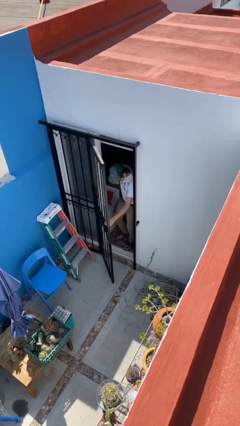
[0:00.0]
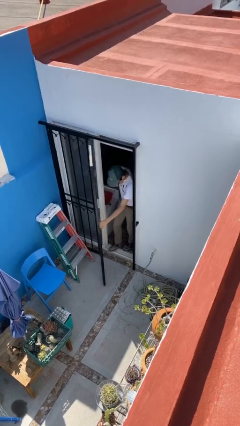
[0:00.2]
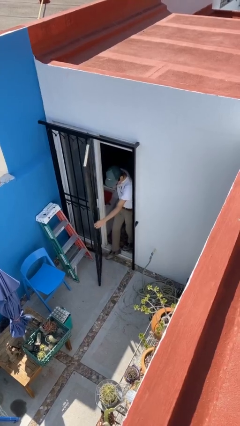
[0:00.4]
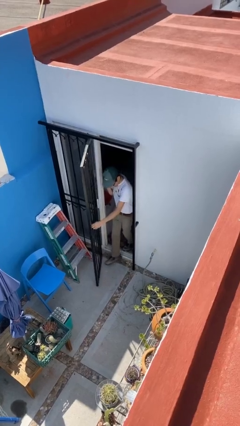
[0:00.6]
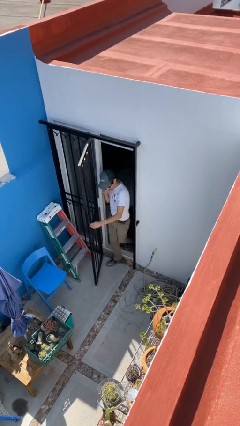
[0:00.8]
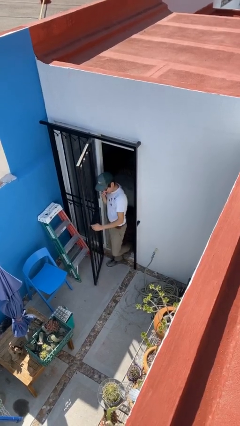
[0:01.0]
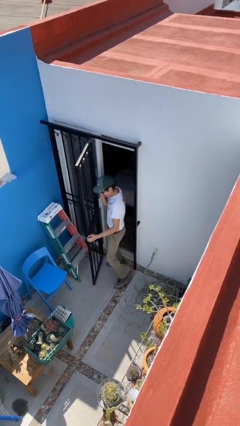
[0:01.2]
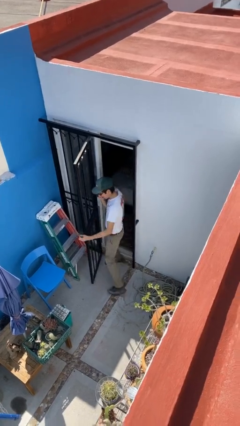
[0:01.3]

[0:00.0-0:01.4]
person opens facility door

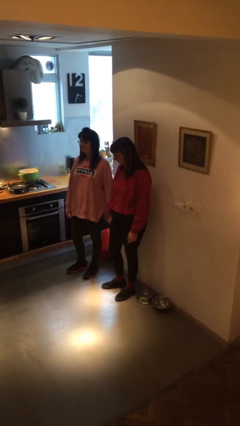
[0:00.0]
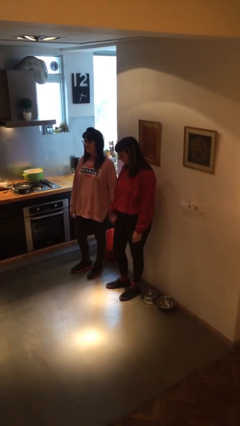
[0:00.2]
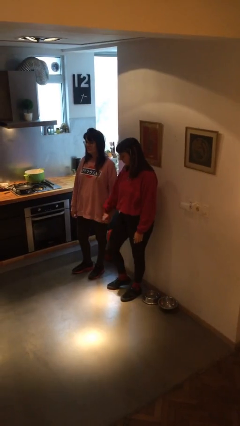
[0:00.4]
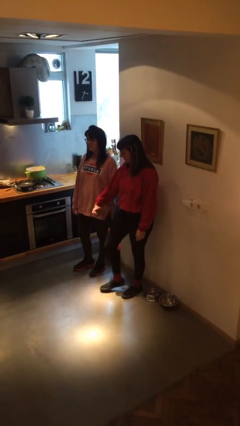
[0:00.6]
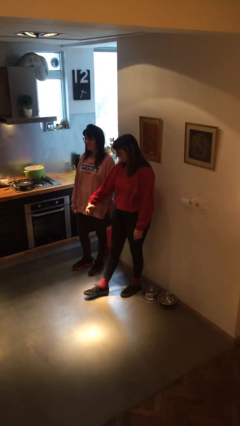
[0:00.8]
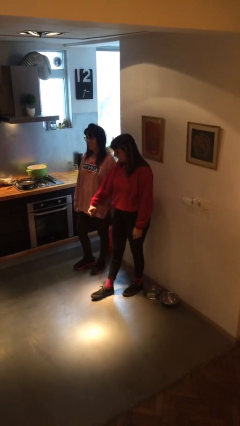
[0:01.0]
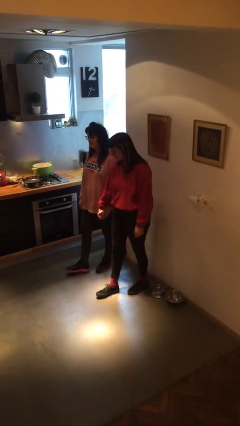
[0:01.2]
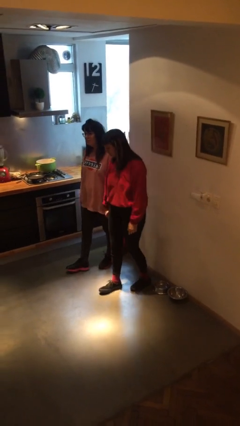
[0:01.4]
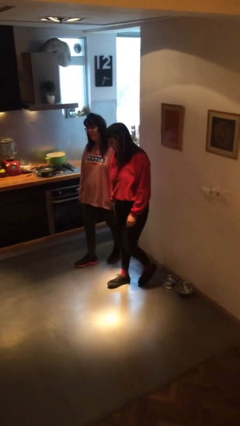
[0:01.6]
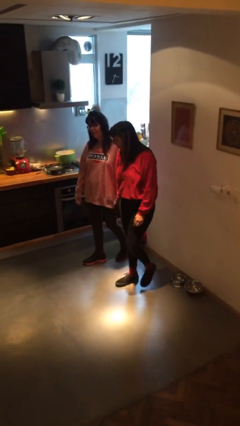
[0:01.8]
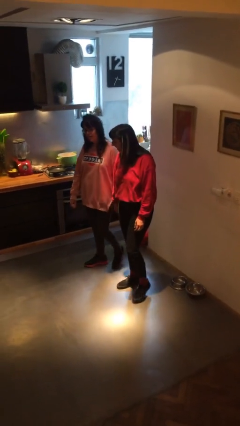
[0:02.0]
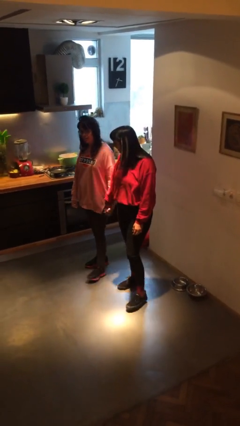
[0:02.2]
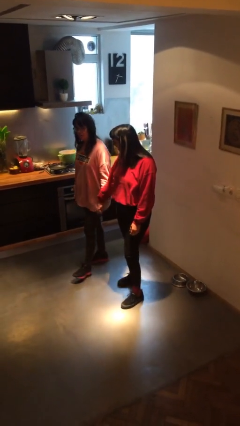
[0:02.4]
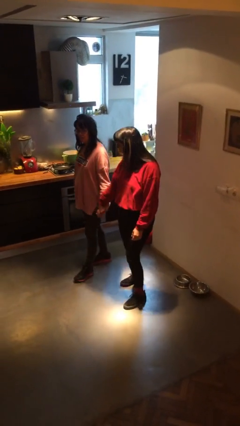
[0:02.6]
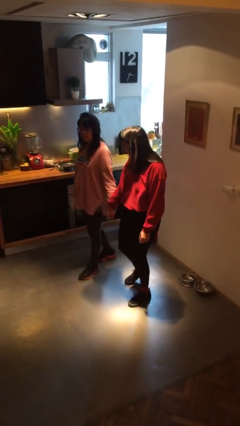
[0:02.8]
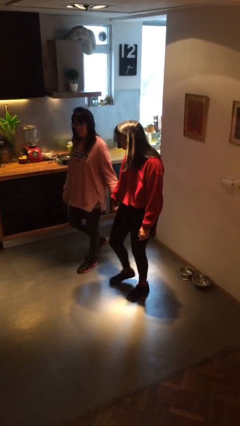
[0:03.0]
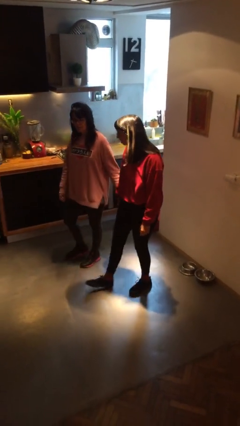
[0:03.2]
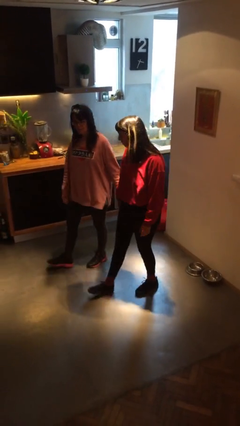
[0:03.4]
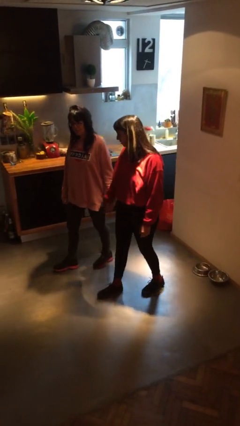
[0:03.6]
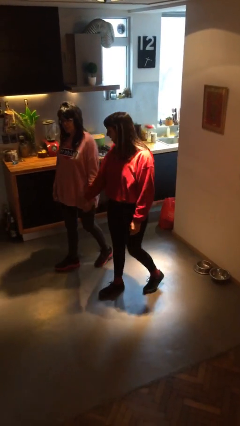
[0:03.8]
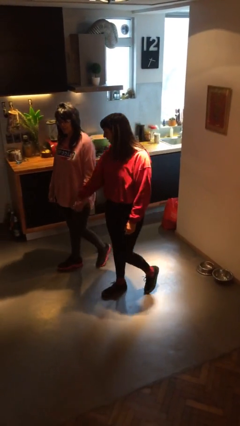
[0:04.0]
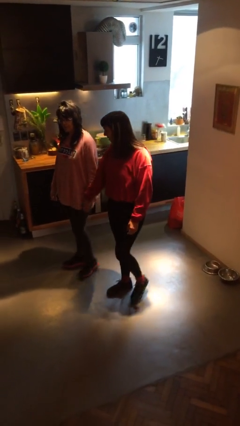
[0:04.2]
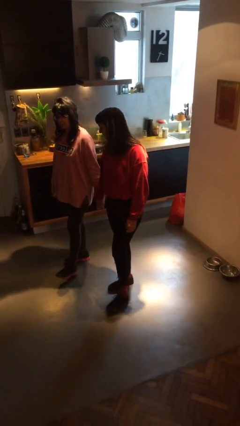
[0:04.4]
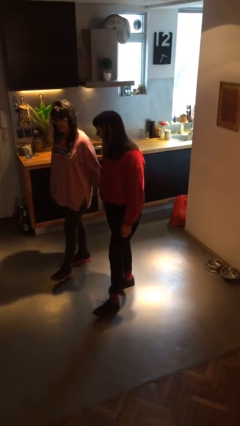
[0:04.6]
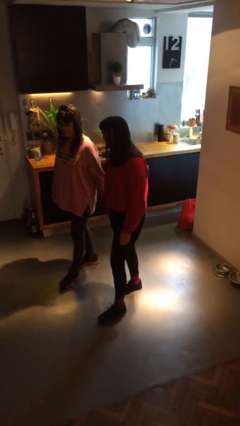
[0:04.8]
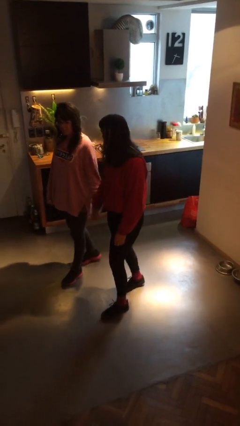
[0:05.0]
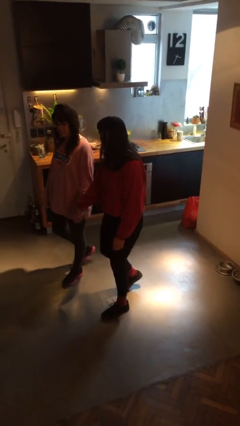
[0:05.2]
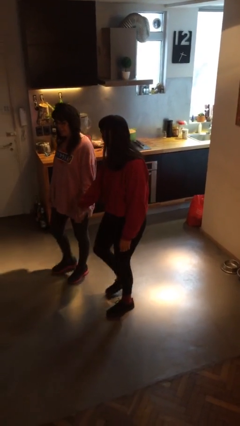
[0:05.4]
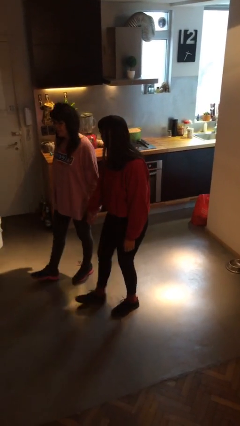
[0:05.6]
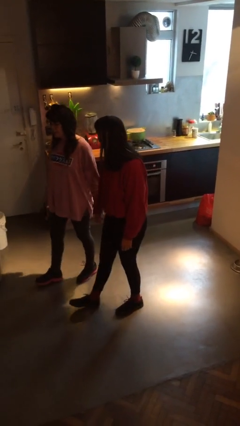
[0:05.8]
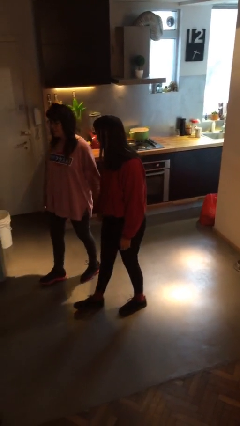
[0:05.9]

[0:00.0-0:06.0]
person holds hand

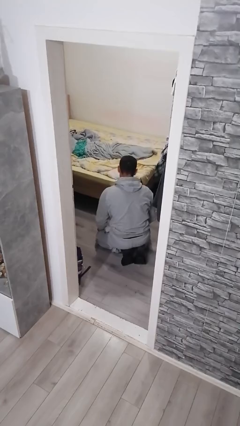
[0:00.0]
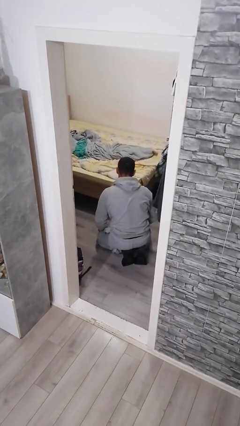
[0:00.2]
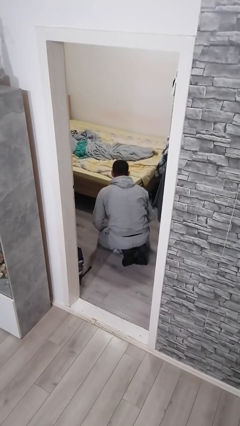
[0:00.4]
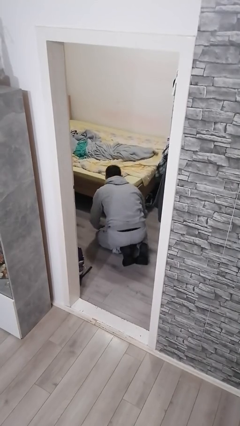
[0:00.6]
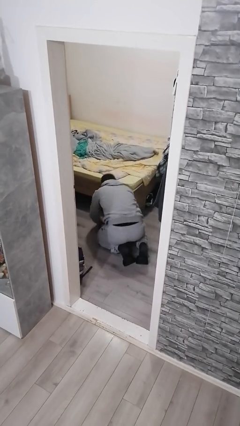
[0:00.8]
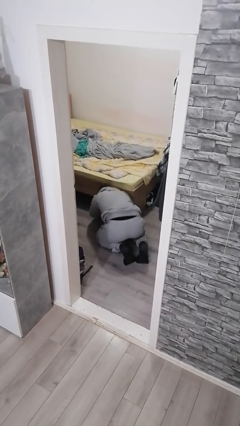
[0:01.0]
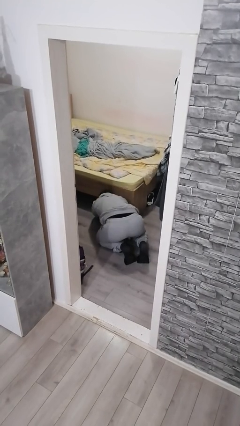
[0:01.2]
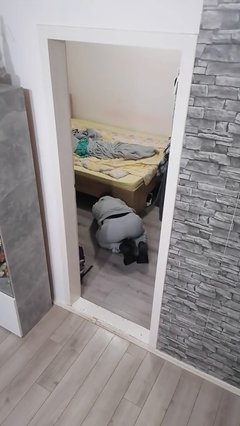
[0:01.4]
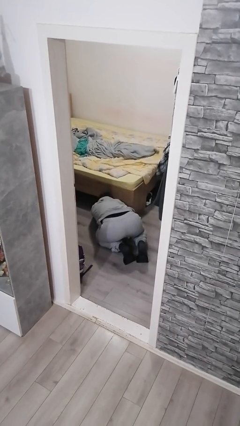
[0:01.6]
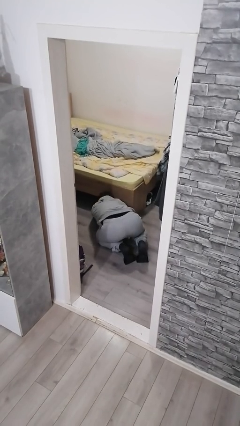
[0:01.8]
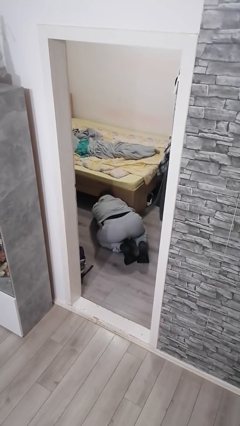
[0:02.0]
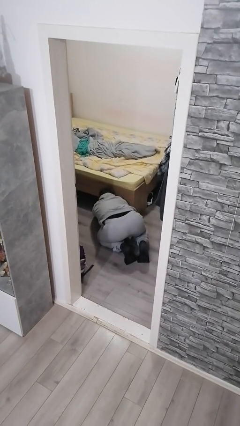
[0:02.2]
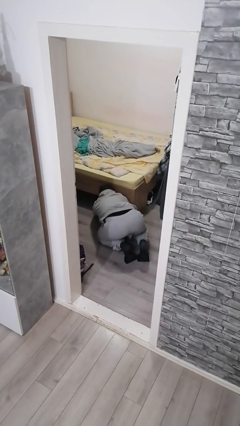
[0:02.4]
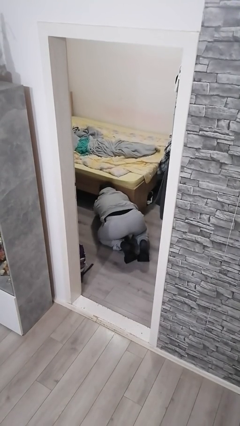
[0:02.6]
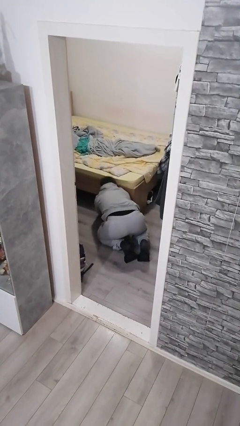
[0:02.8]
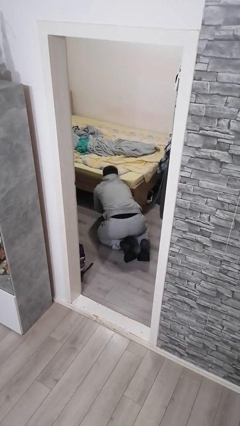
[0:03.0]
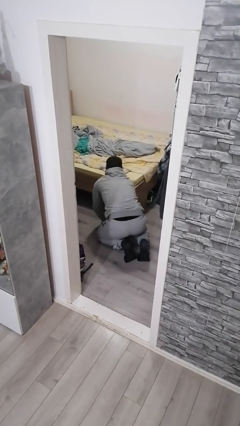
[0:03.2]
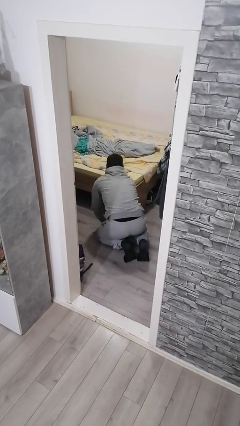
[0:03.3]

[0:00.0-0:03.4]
person searches under bed

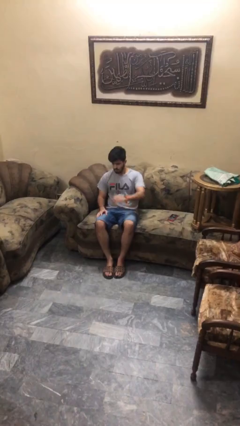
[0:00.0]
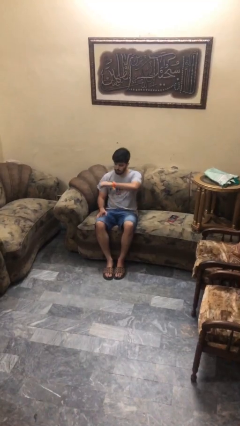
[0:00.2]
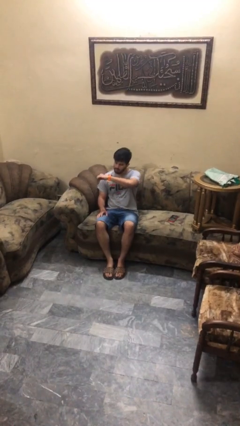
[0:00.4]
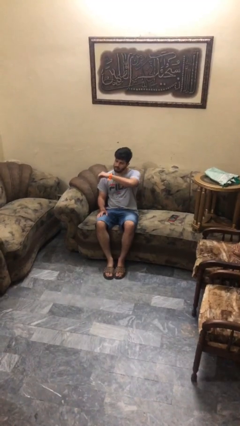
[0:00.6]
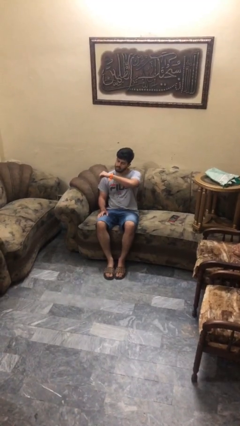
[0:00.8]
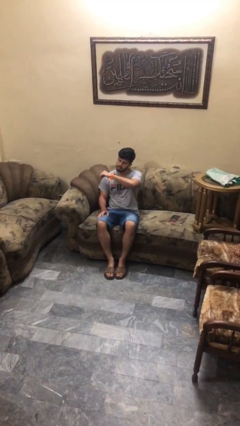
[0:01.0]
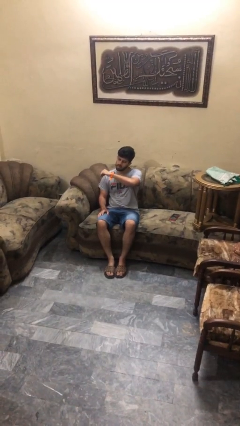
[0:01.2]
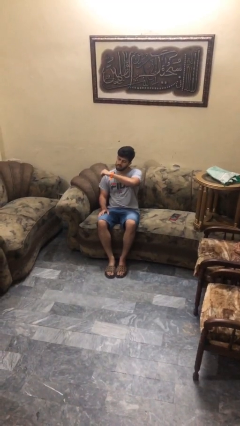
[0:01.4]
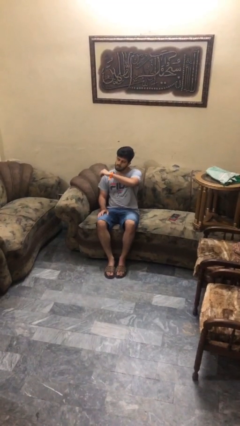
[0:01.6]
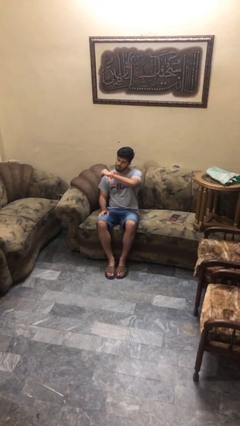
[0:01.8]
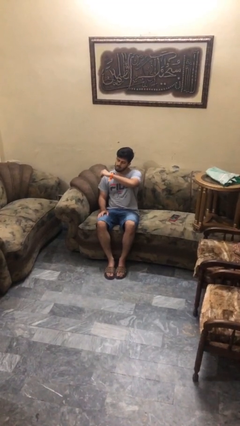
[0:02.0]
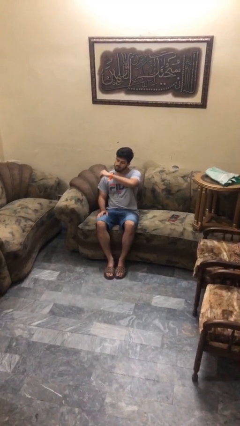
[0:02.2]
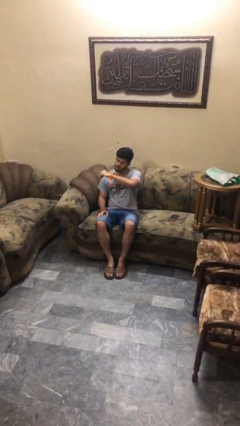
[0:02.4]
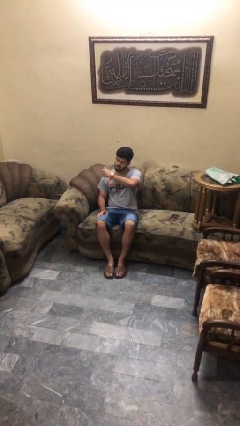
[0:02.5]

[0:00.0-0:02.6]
person looks at wristwatch

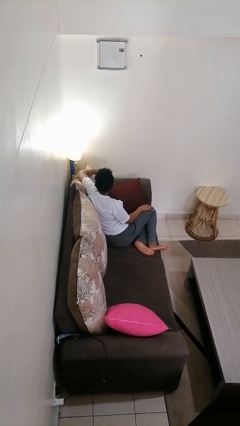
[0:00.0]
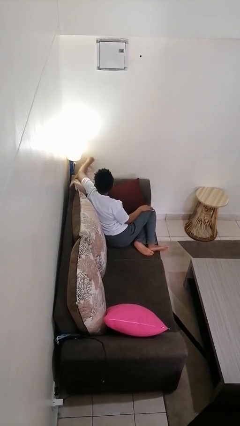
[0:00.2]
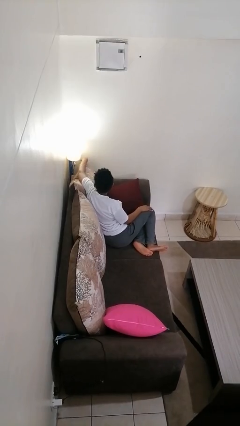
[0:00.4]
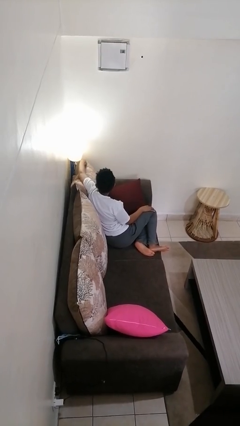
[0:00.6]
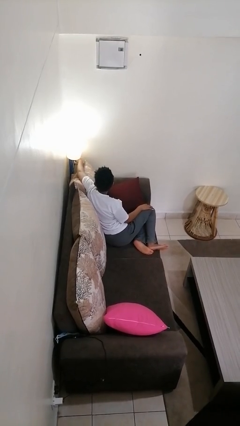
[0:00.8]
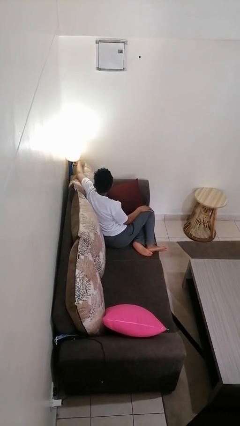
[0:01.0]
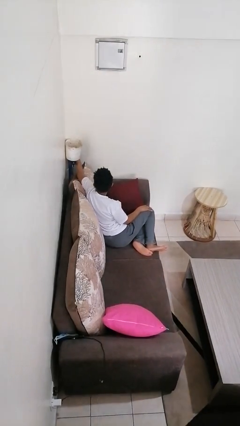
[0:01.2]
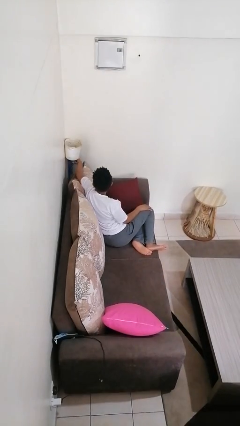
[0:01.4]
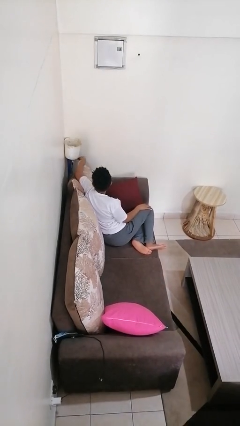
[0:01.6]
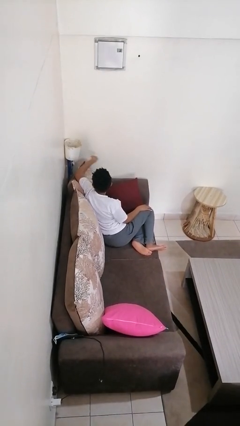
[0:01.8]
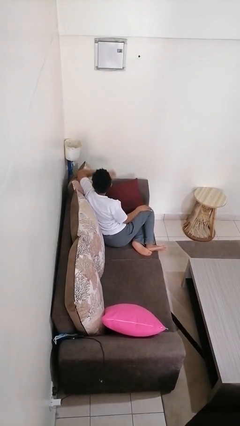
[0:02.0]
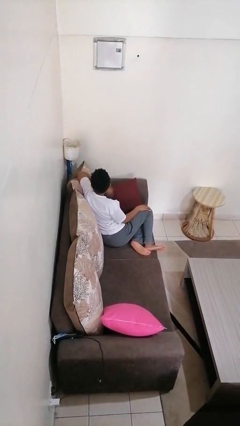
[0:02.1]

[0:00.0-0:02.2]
person turns off lamp

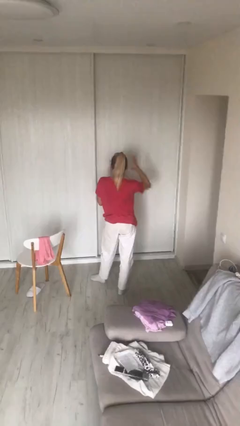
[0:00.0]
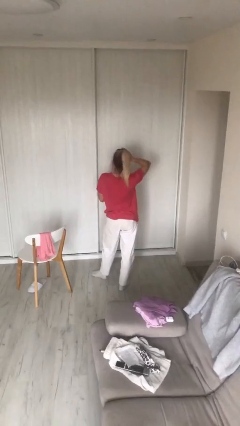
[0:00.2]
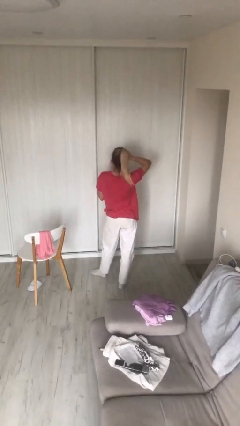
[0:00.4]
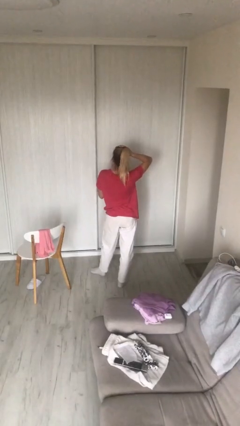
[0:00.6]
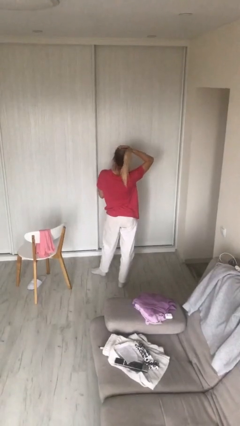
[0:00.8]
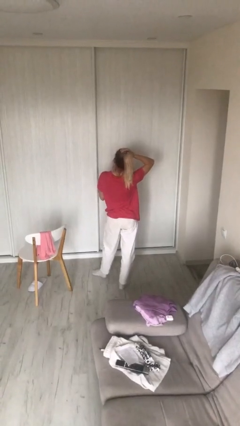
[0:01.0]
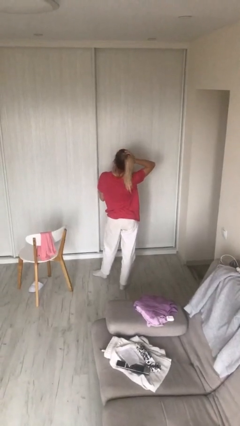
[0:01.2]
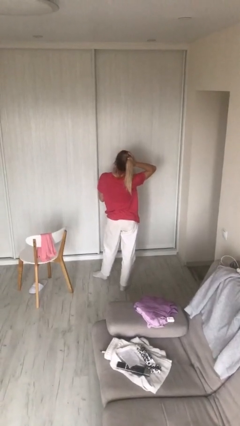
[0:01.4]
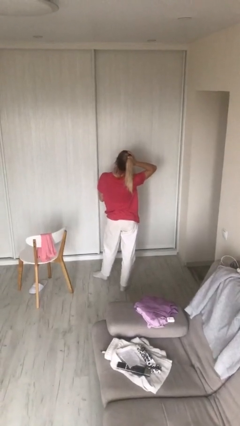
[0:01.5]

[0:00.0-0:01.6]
person pats head
